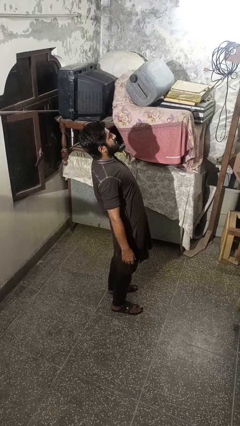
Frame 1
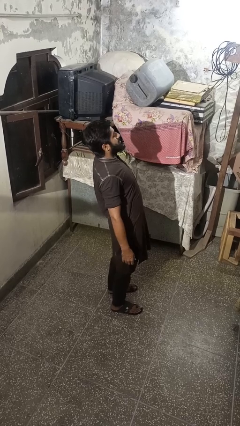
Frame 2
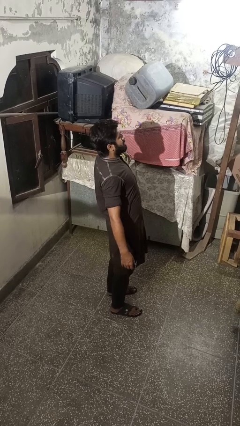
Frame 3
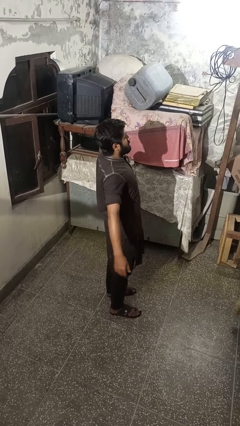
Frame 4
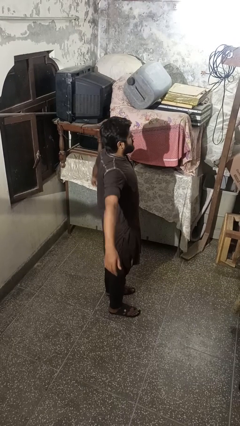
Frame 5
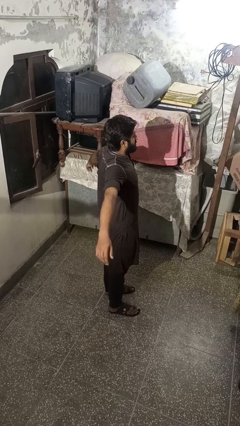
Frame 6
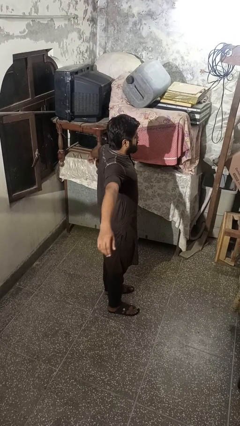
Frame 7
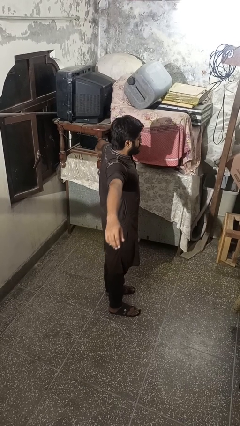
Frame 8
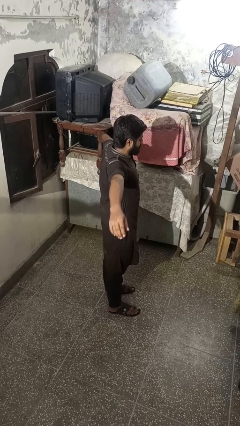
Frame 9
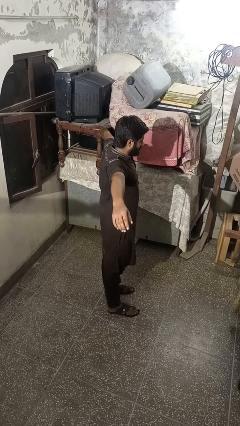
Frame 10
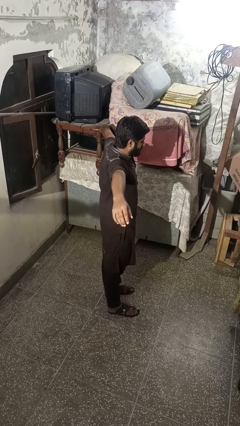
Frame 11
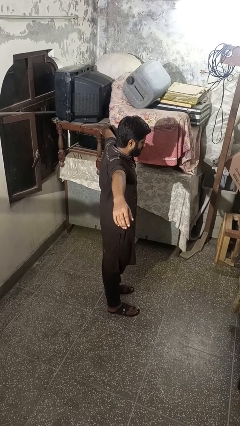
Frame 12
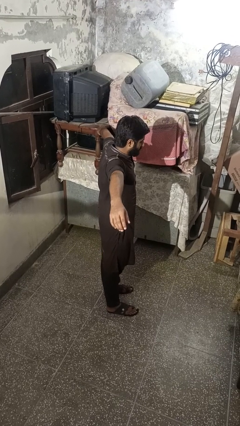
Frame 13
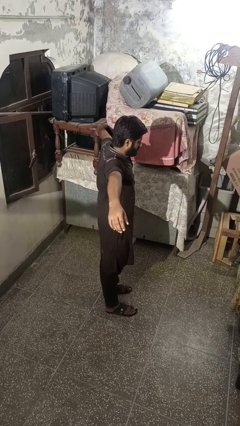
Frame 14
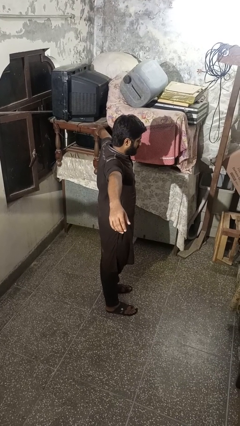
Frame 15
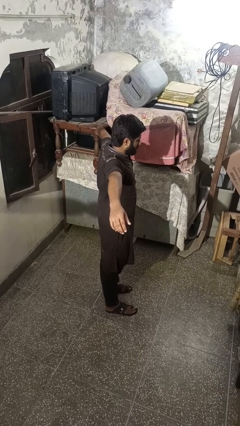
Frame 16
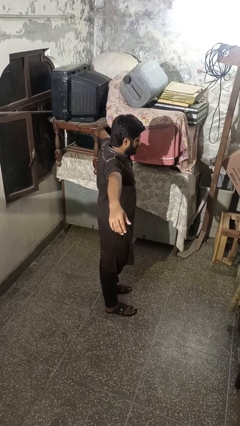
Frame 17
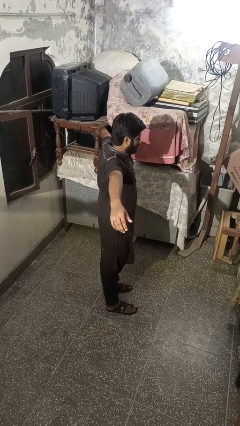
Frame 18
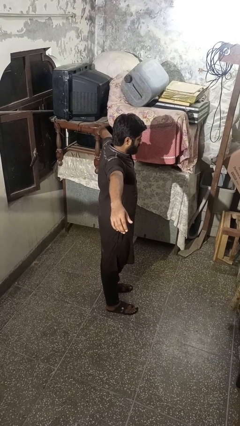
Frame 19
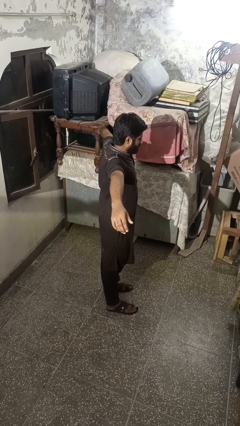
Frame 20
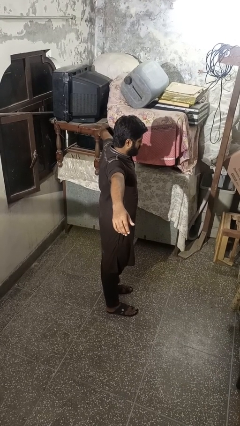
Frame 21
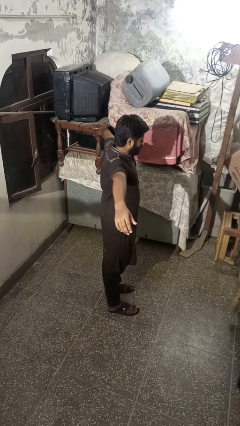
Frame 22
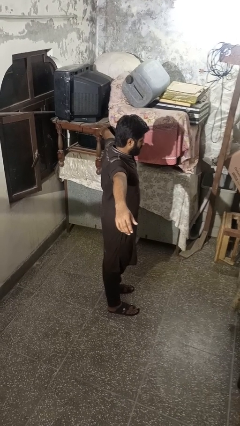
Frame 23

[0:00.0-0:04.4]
person stretches arms to side

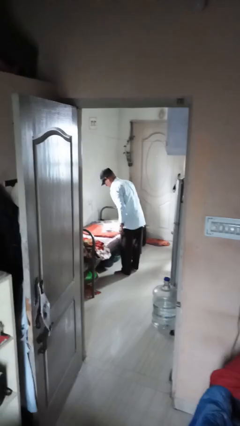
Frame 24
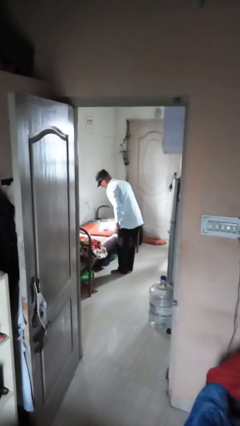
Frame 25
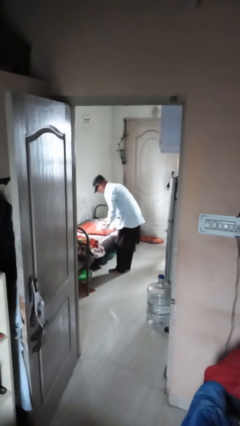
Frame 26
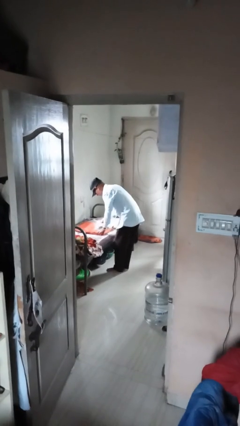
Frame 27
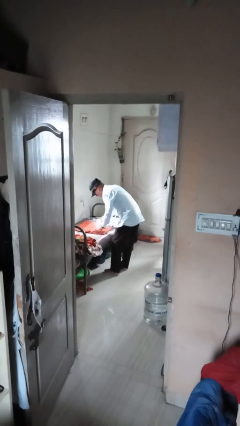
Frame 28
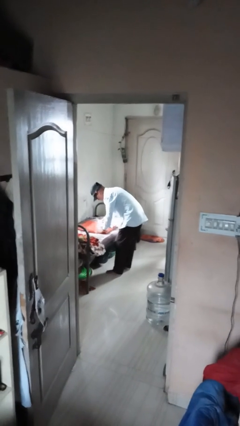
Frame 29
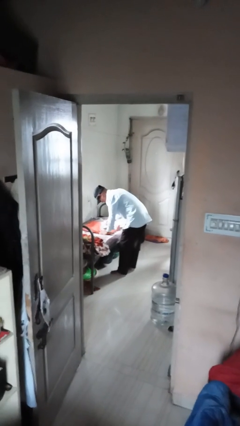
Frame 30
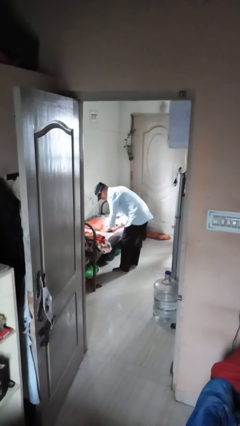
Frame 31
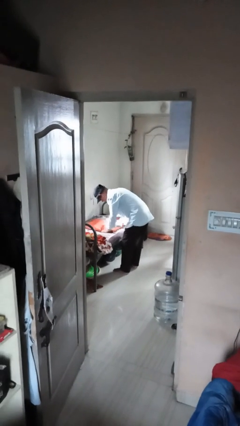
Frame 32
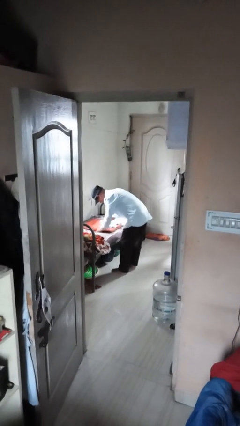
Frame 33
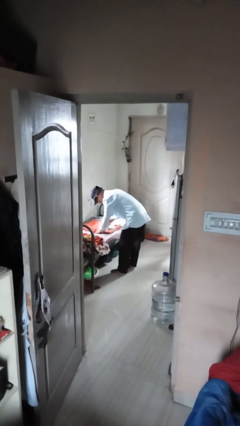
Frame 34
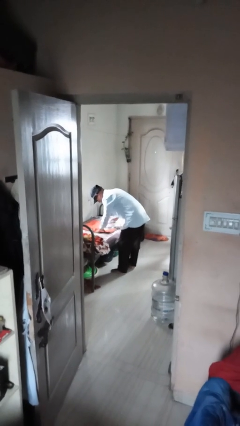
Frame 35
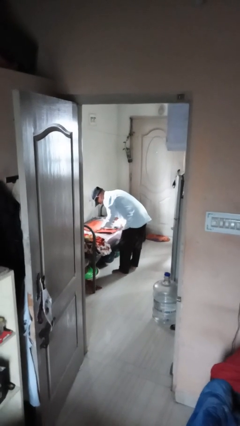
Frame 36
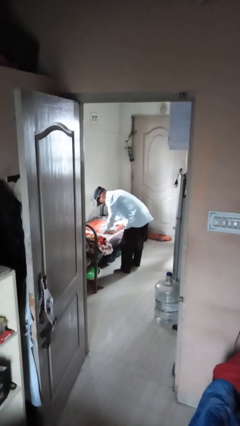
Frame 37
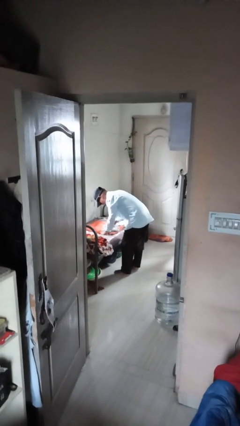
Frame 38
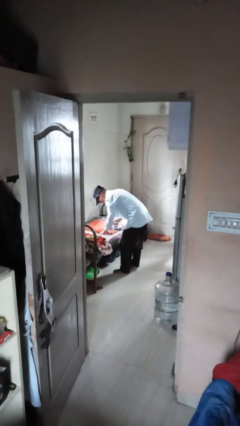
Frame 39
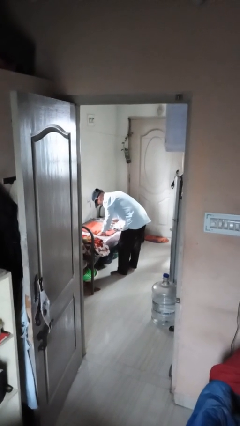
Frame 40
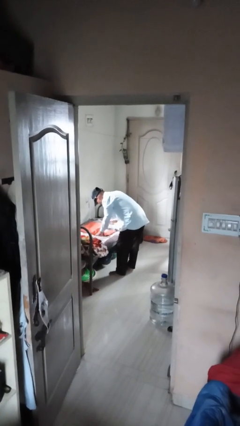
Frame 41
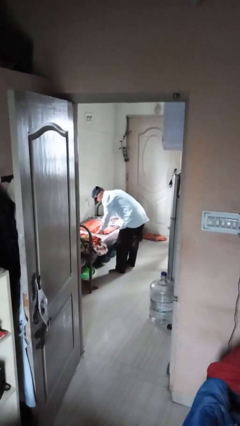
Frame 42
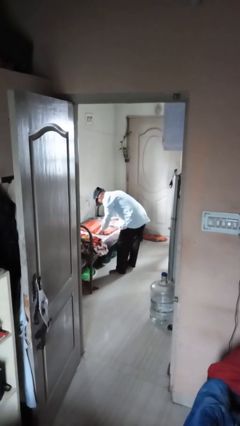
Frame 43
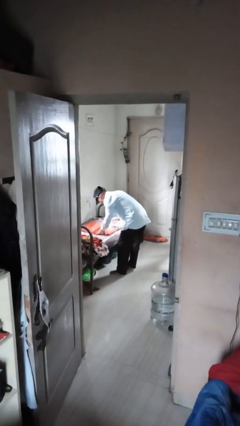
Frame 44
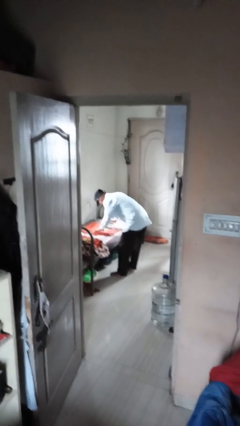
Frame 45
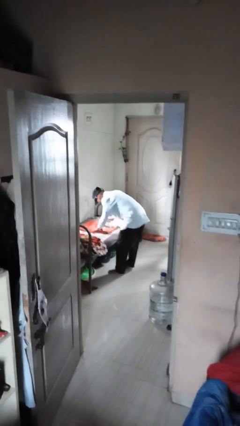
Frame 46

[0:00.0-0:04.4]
person irons clothes

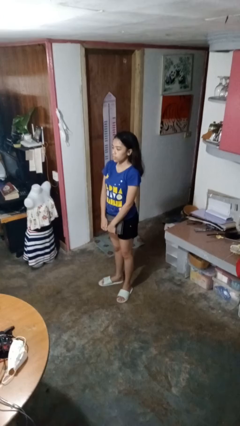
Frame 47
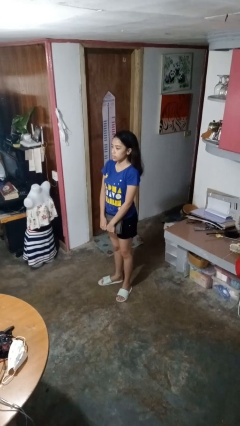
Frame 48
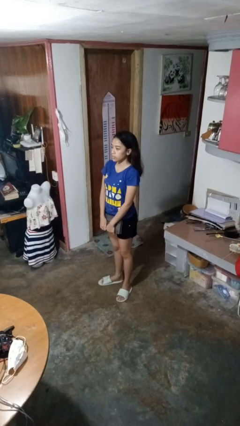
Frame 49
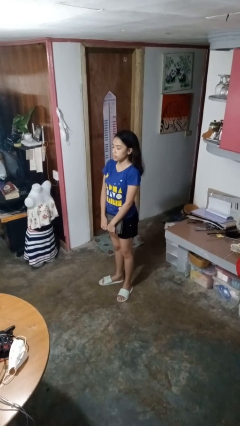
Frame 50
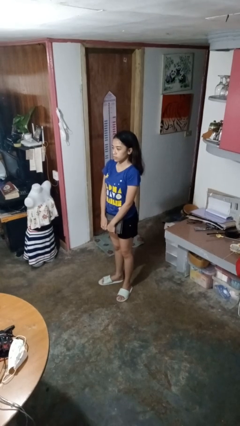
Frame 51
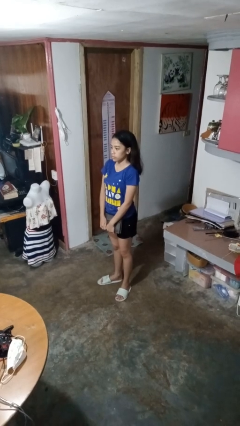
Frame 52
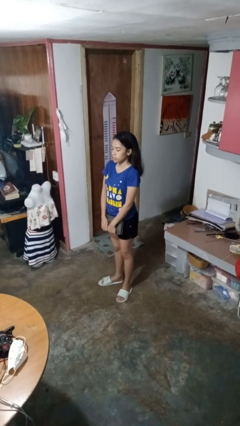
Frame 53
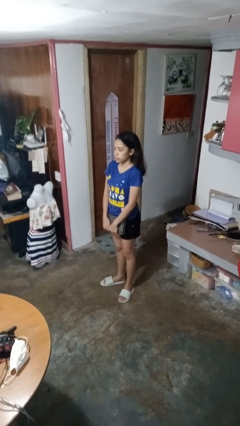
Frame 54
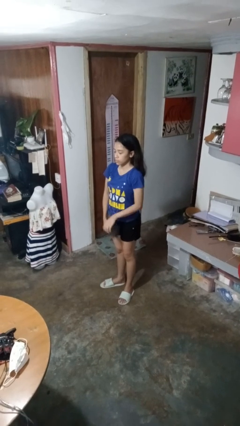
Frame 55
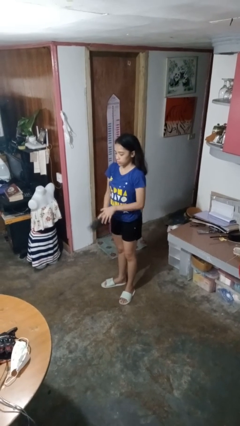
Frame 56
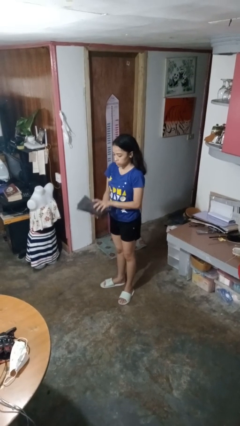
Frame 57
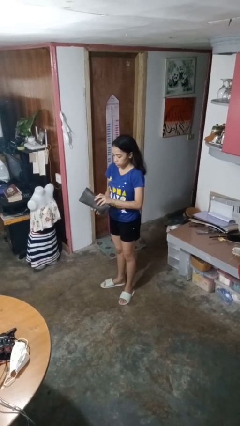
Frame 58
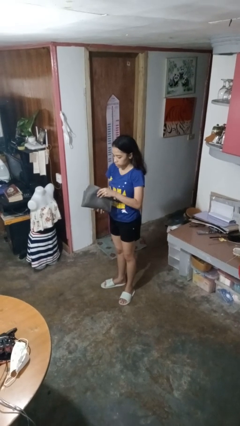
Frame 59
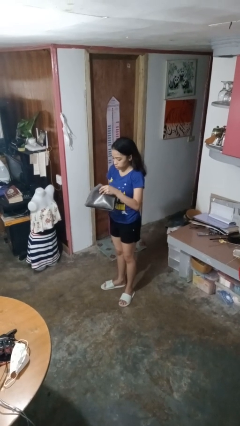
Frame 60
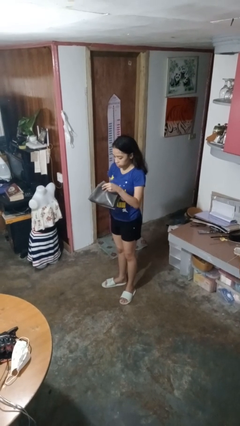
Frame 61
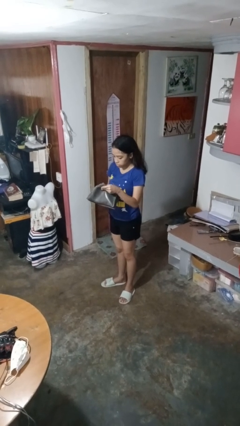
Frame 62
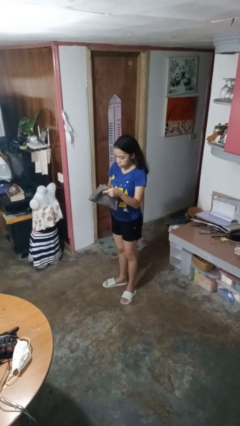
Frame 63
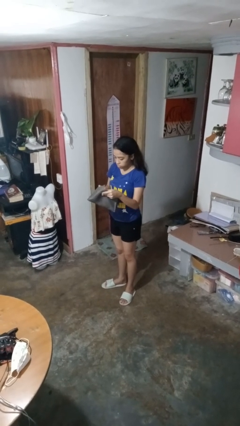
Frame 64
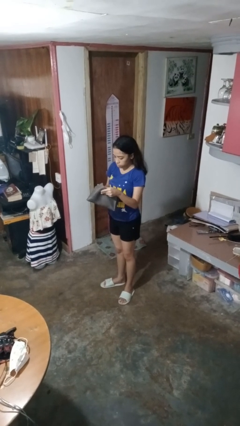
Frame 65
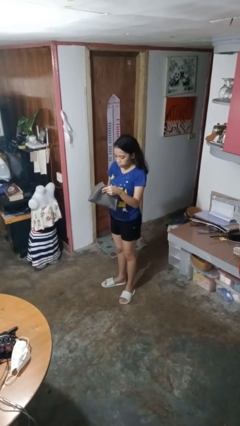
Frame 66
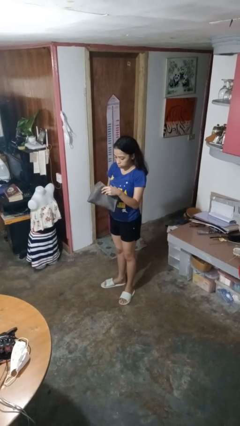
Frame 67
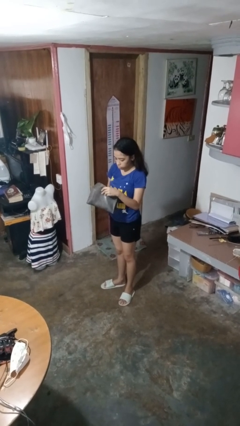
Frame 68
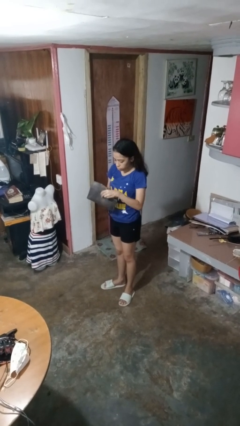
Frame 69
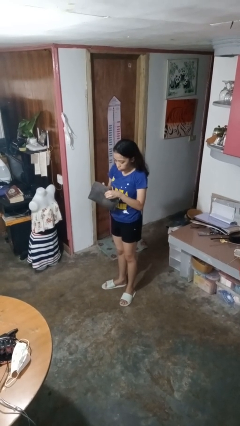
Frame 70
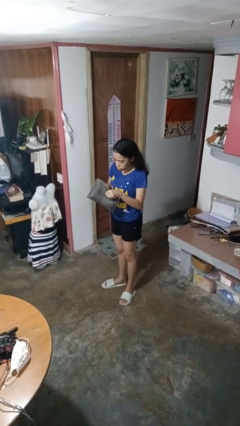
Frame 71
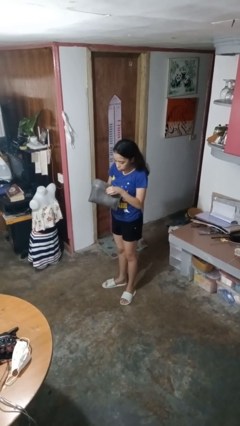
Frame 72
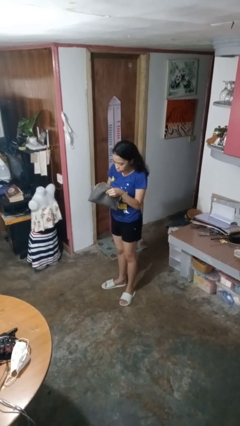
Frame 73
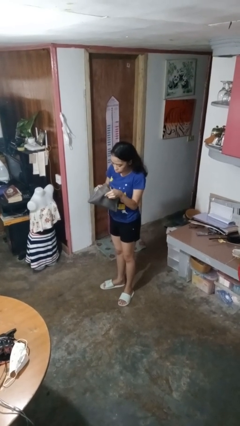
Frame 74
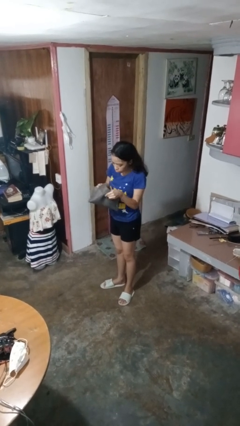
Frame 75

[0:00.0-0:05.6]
person searches in purse

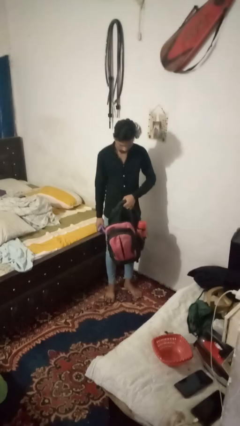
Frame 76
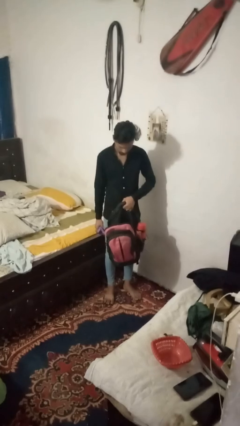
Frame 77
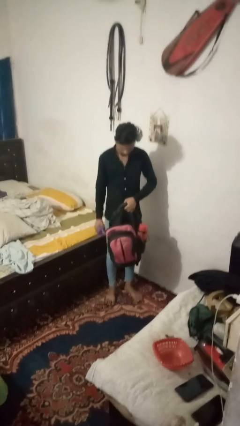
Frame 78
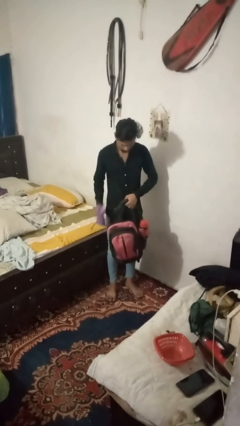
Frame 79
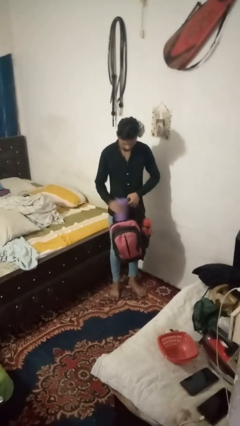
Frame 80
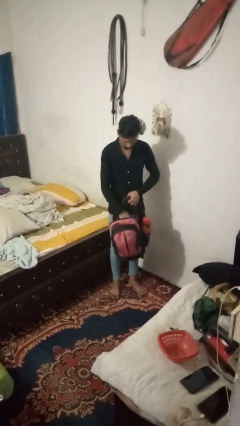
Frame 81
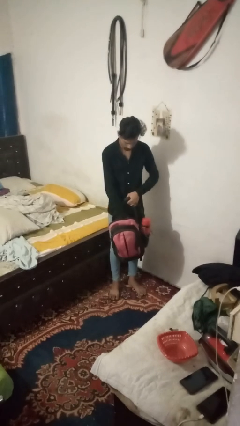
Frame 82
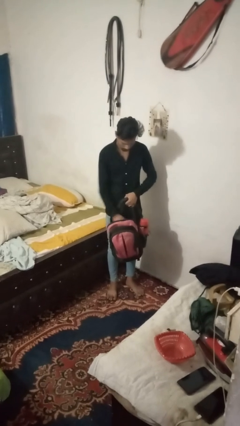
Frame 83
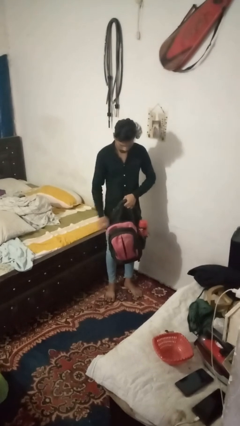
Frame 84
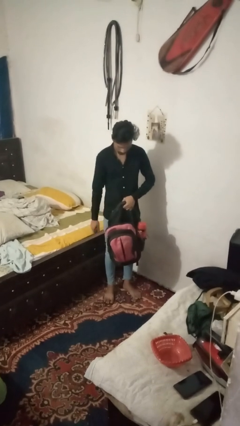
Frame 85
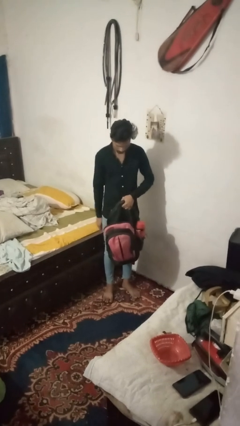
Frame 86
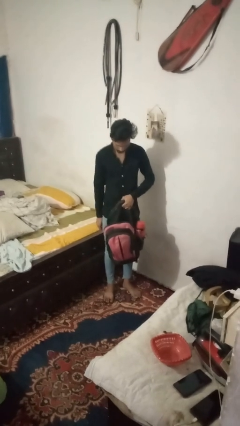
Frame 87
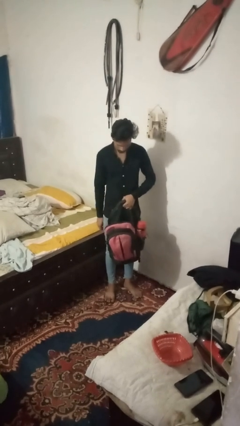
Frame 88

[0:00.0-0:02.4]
person puts object into bag

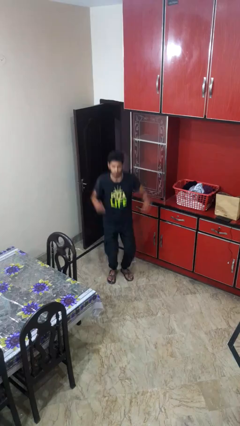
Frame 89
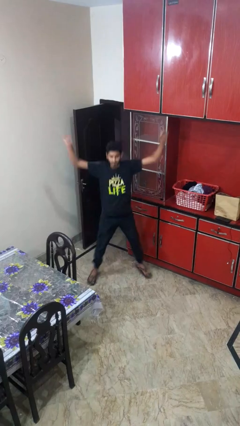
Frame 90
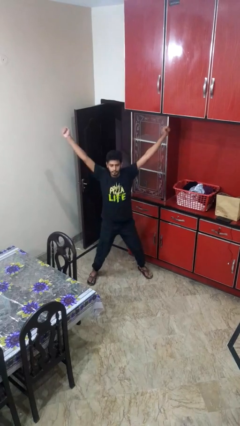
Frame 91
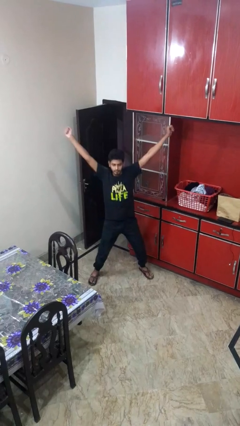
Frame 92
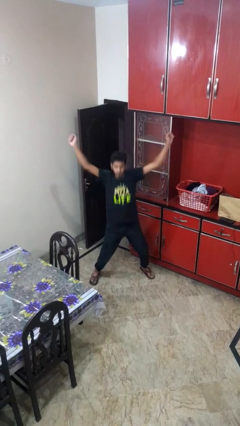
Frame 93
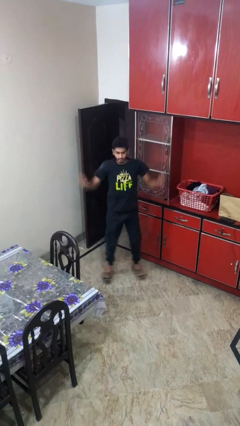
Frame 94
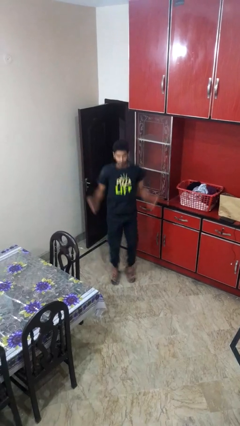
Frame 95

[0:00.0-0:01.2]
person exercises with jumping jacks
